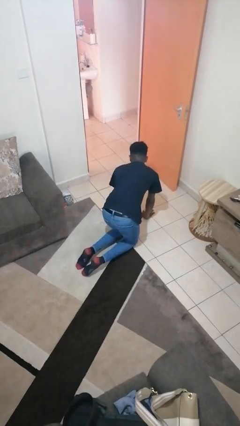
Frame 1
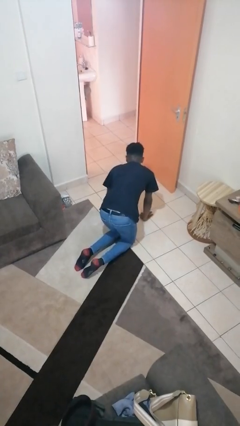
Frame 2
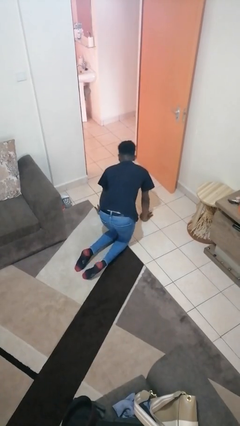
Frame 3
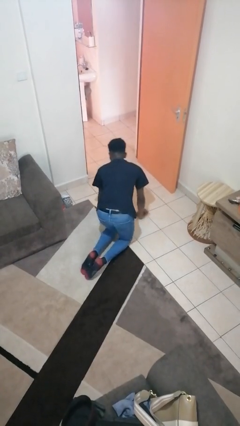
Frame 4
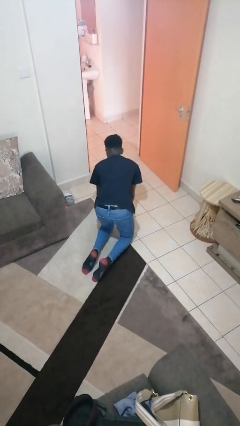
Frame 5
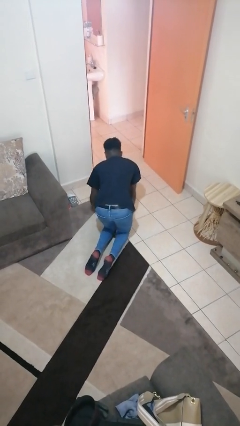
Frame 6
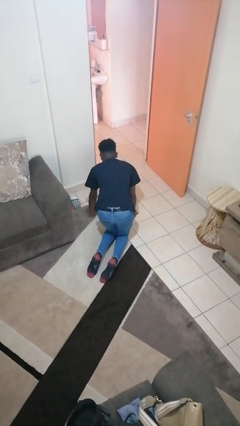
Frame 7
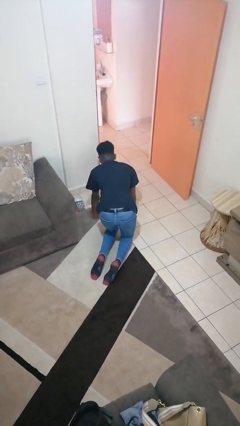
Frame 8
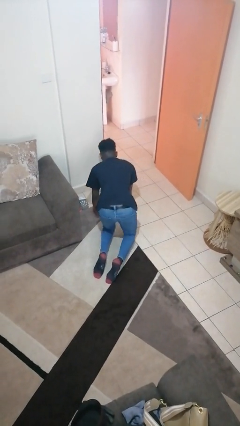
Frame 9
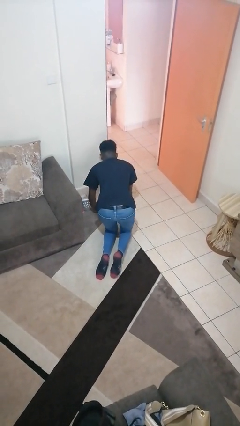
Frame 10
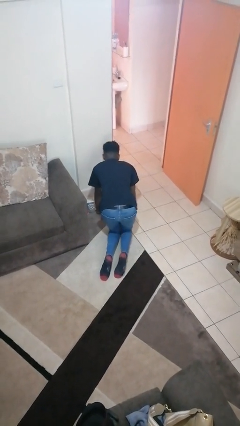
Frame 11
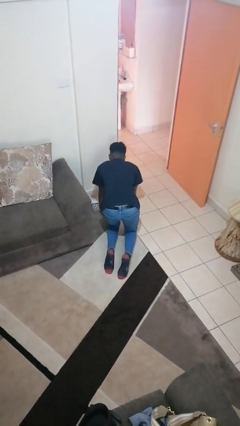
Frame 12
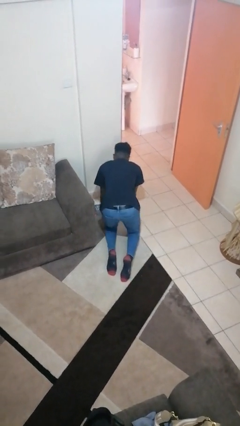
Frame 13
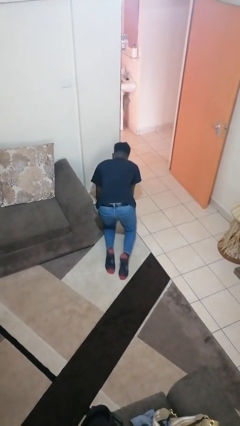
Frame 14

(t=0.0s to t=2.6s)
person crawls

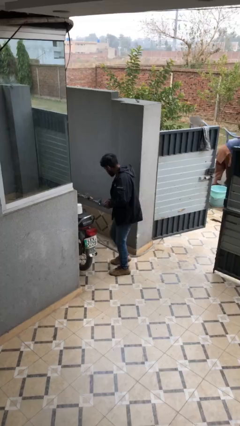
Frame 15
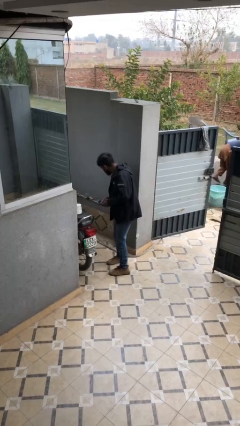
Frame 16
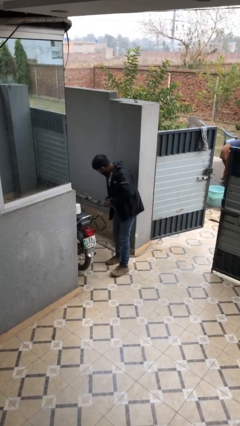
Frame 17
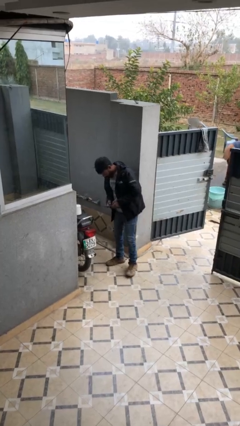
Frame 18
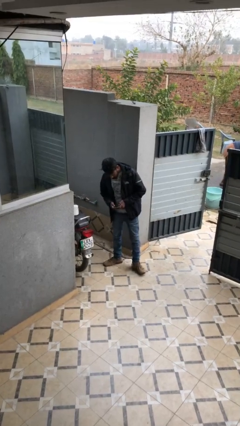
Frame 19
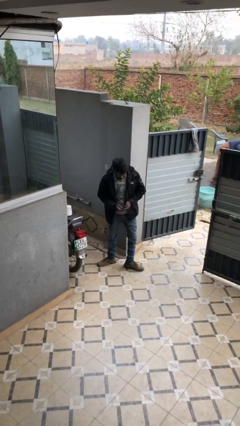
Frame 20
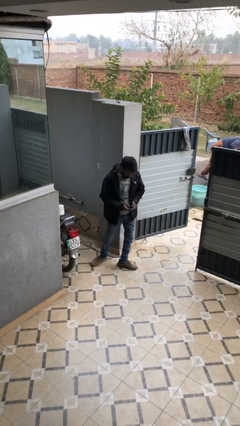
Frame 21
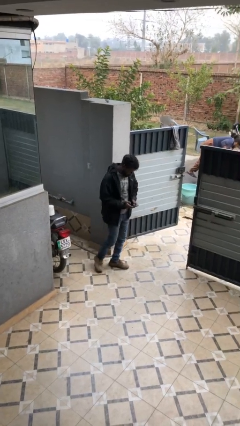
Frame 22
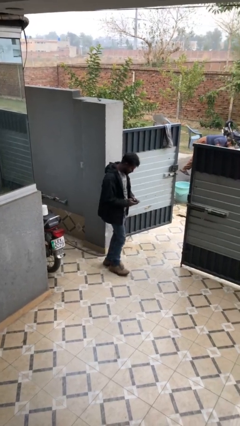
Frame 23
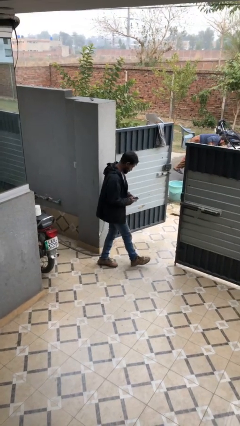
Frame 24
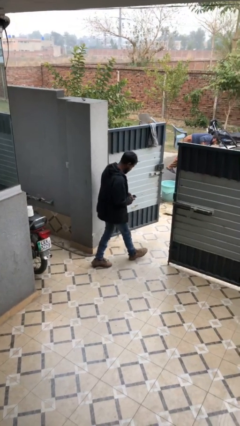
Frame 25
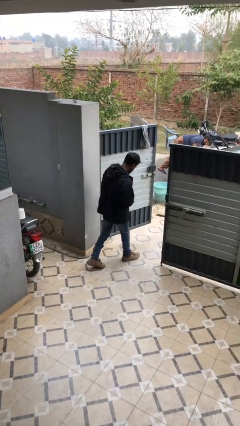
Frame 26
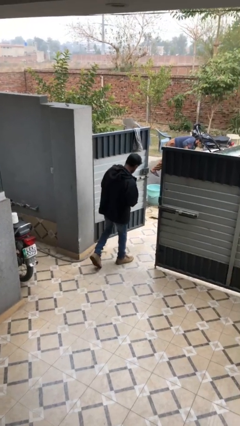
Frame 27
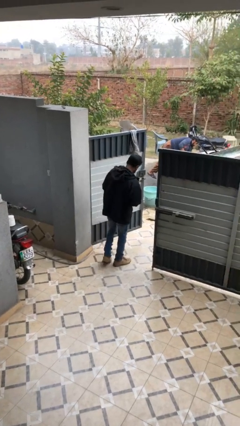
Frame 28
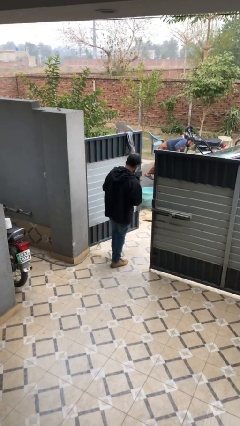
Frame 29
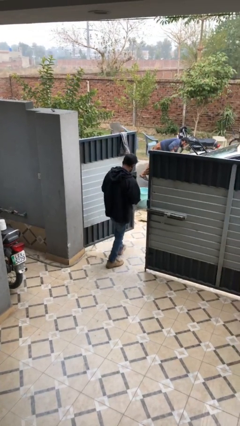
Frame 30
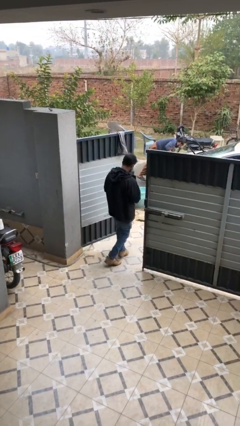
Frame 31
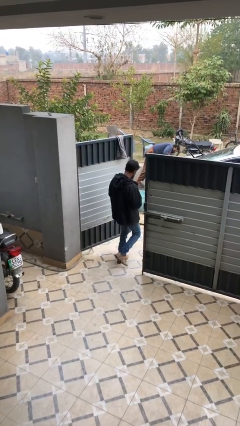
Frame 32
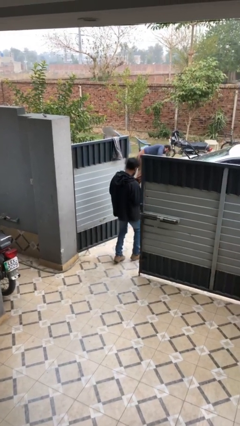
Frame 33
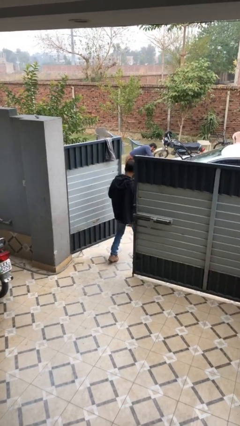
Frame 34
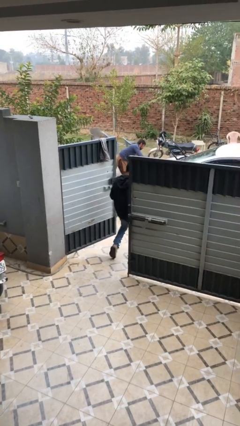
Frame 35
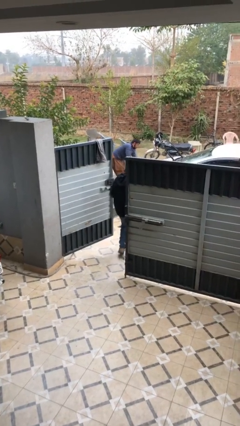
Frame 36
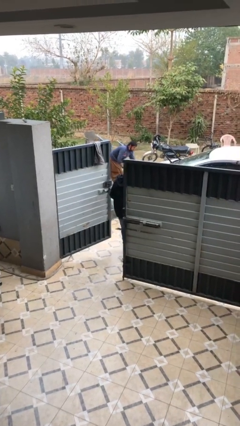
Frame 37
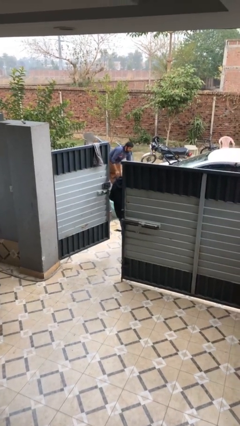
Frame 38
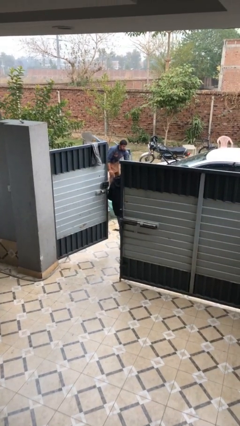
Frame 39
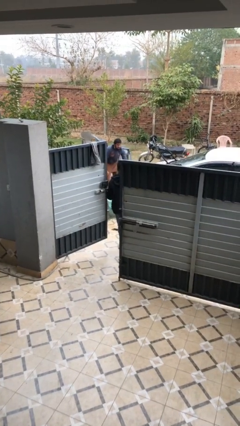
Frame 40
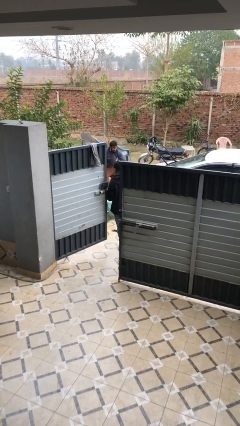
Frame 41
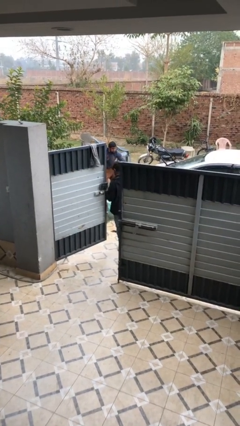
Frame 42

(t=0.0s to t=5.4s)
person exits scene through structure

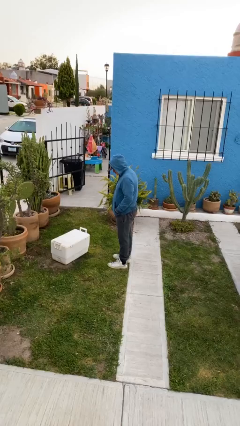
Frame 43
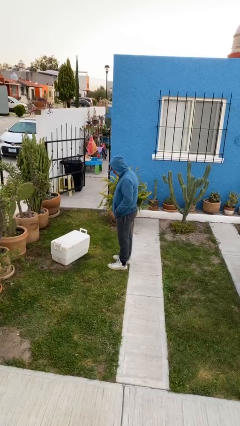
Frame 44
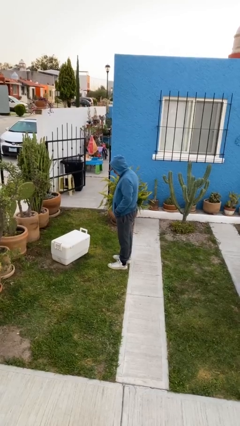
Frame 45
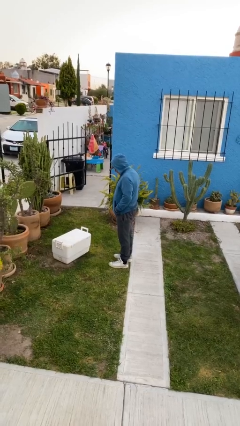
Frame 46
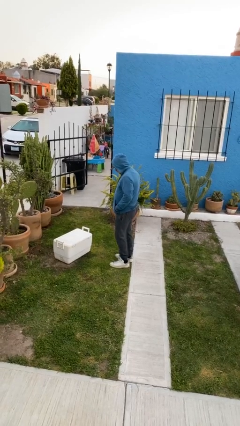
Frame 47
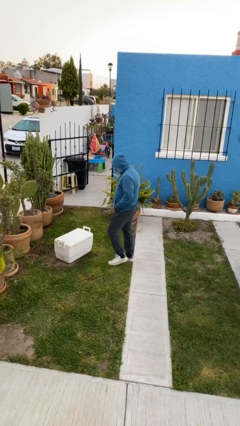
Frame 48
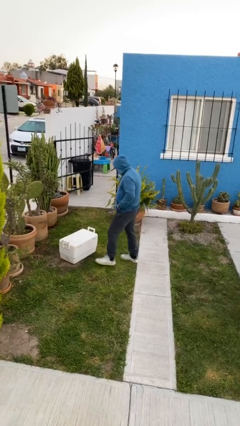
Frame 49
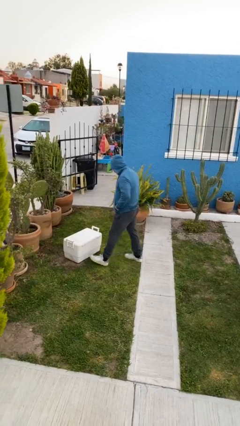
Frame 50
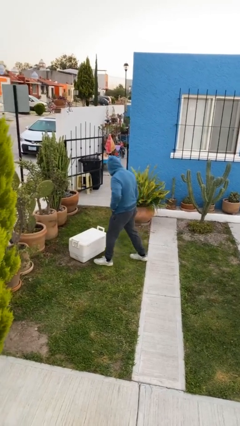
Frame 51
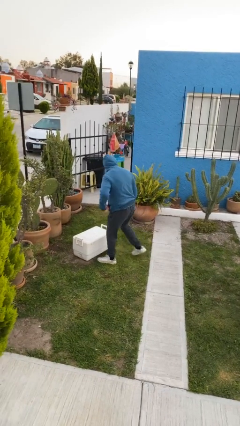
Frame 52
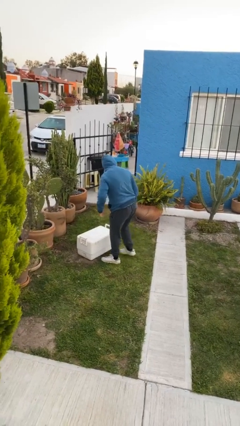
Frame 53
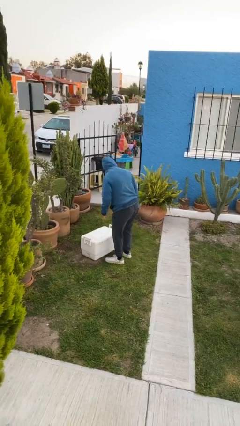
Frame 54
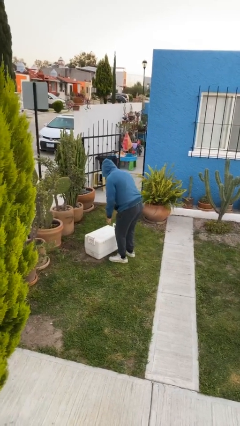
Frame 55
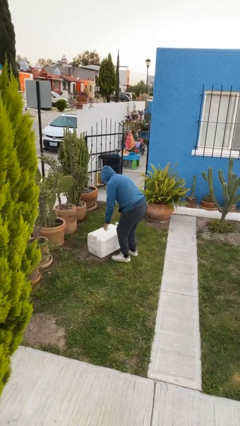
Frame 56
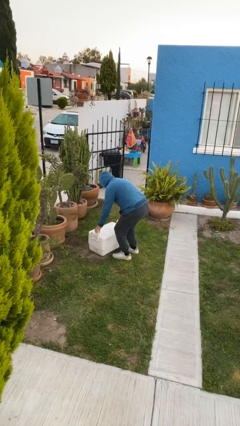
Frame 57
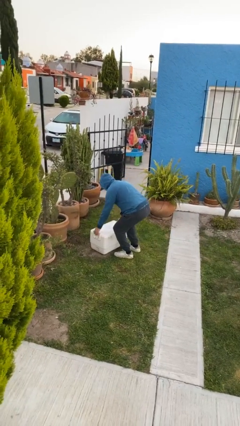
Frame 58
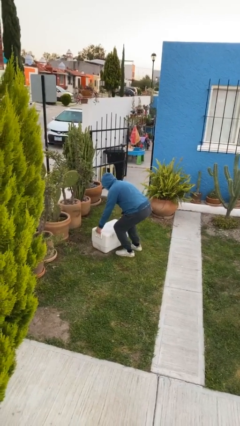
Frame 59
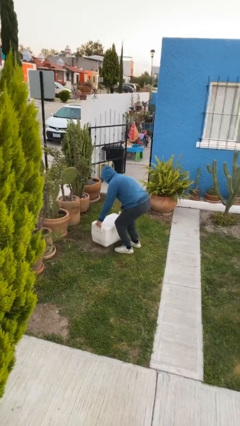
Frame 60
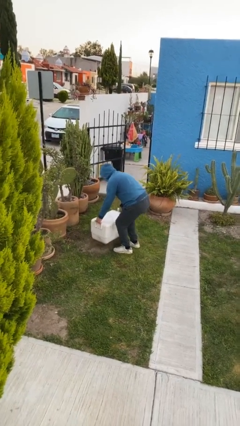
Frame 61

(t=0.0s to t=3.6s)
person picks up object from floor

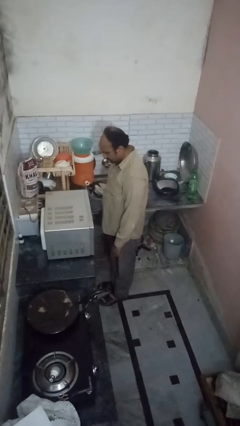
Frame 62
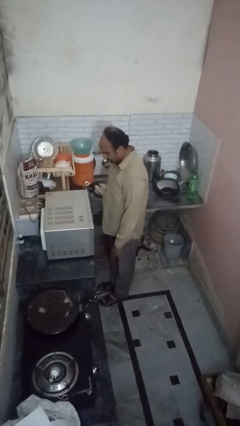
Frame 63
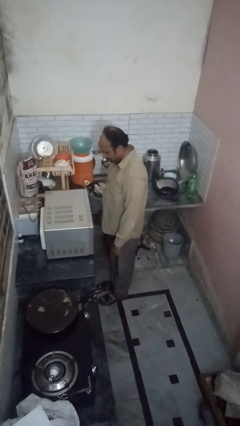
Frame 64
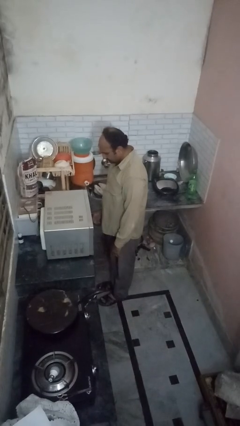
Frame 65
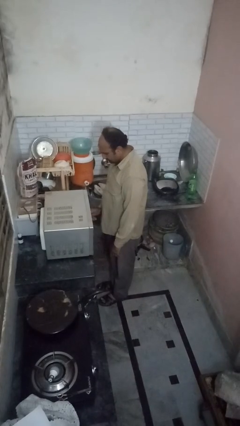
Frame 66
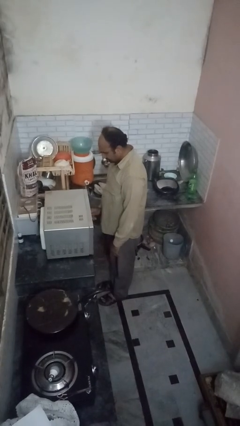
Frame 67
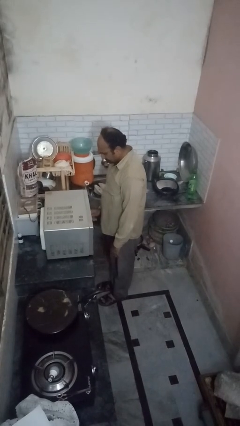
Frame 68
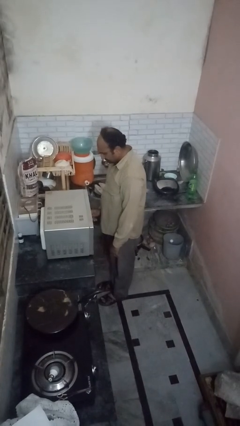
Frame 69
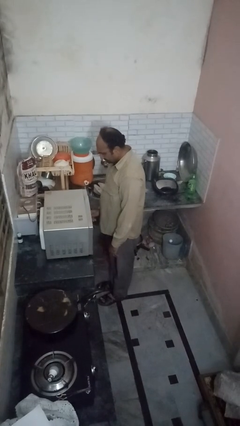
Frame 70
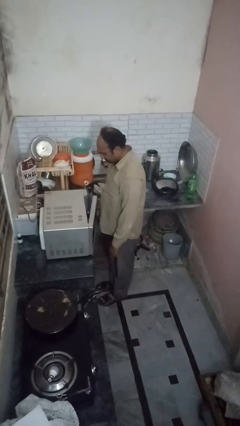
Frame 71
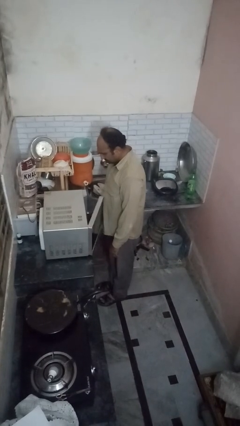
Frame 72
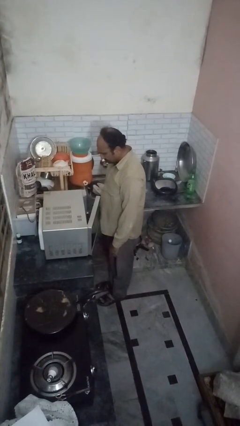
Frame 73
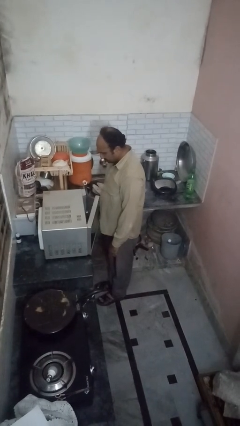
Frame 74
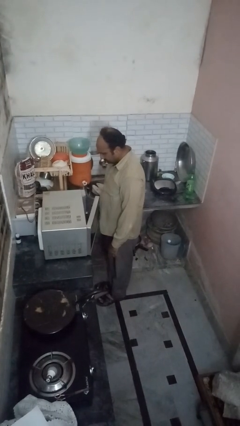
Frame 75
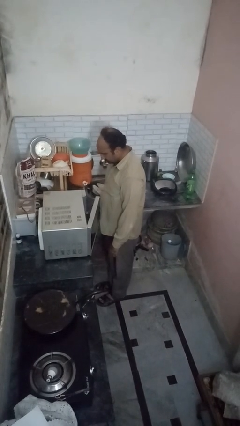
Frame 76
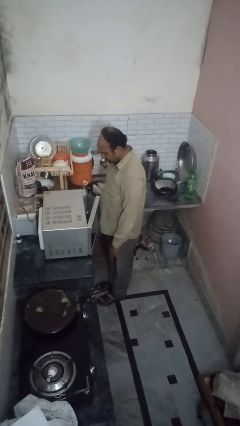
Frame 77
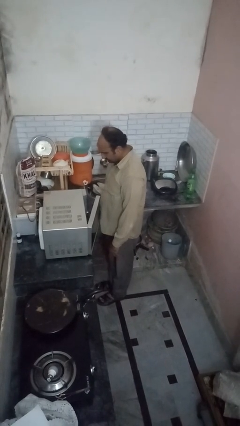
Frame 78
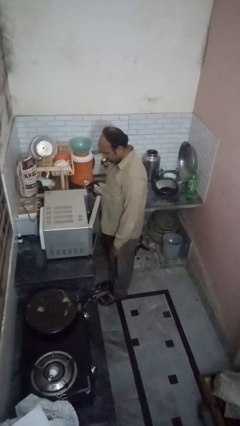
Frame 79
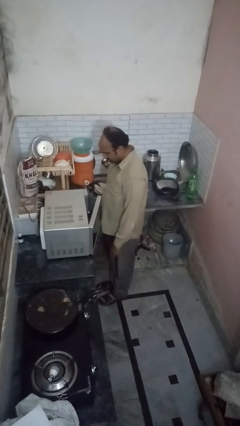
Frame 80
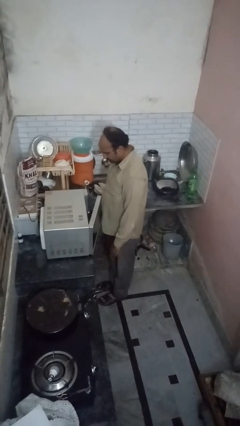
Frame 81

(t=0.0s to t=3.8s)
person opens oven door

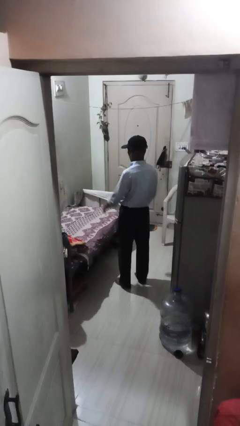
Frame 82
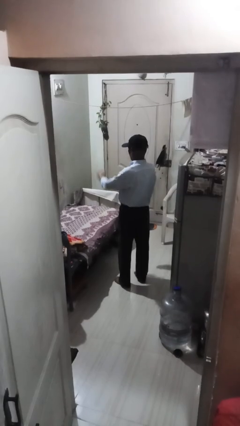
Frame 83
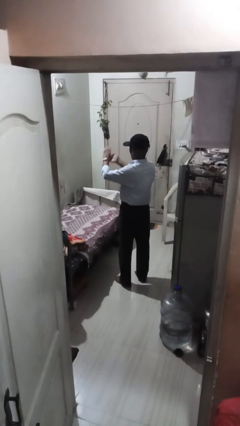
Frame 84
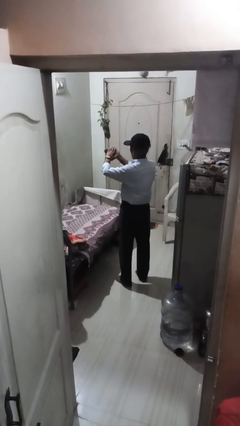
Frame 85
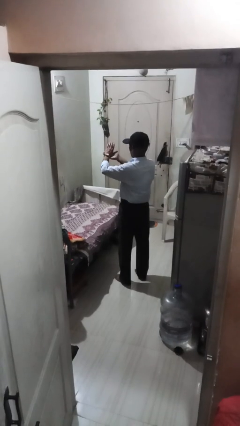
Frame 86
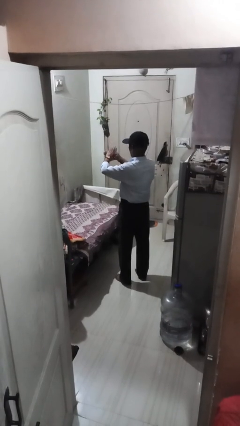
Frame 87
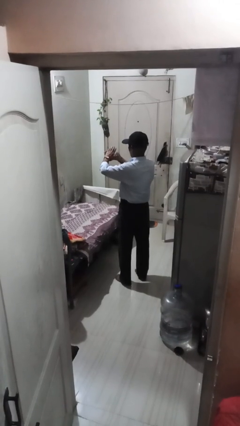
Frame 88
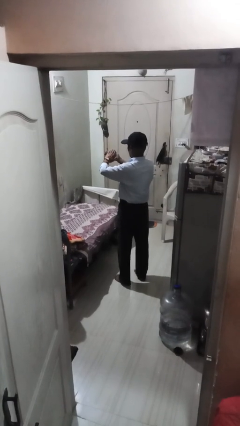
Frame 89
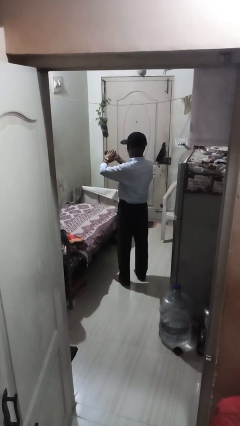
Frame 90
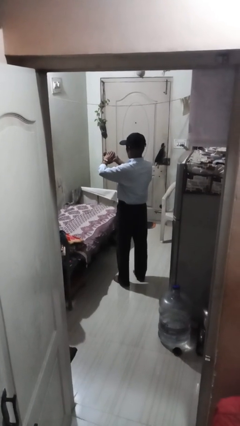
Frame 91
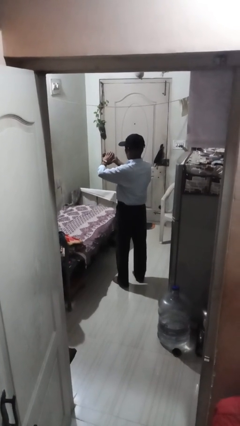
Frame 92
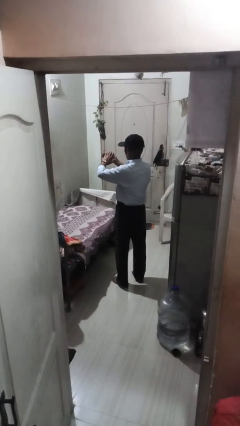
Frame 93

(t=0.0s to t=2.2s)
person claps hands
